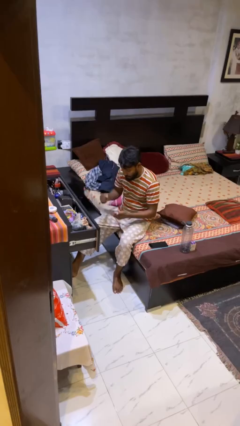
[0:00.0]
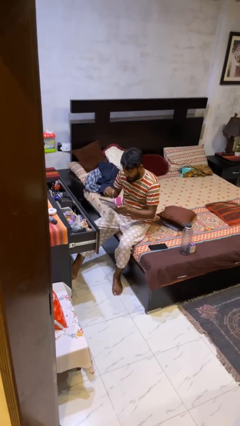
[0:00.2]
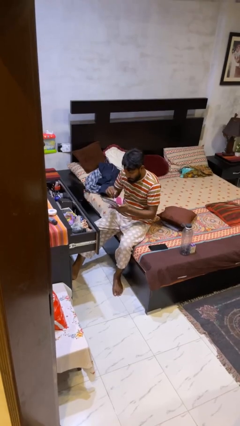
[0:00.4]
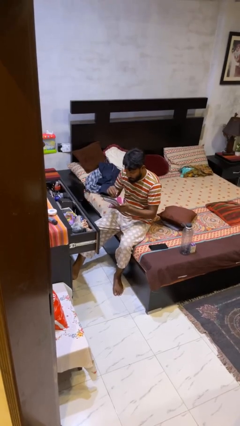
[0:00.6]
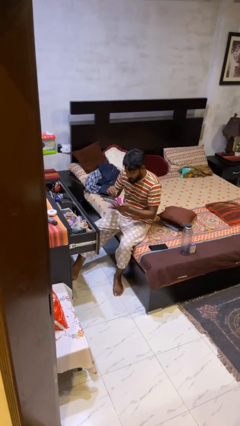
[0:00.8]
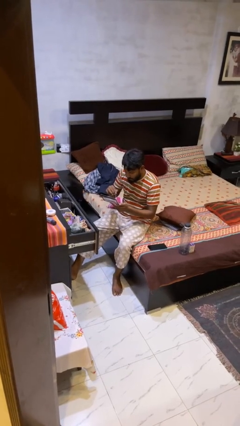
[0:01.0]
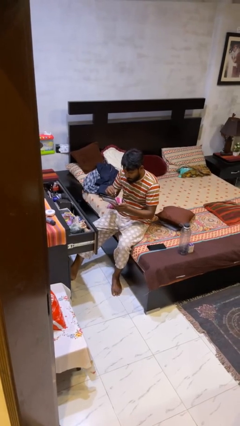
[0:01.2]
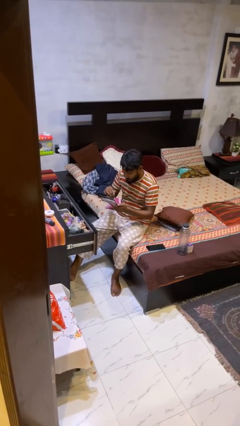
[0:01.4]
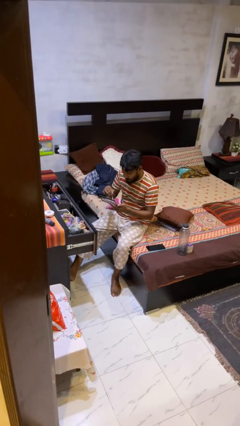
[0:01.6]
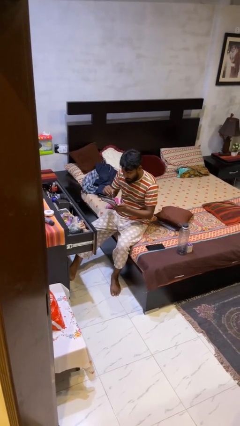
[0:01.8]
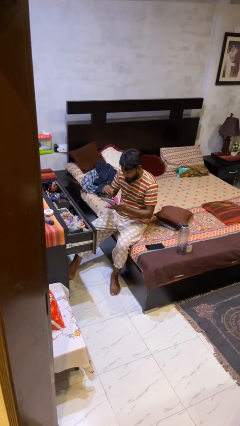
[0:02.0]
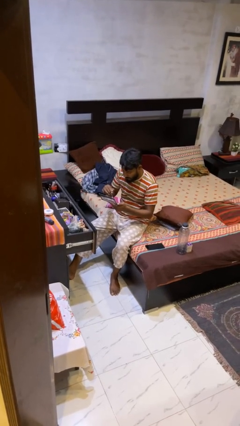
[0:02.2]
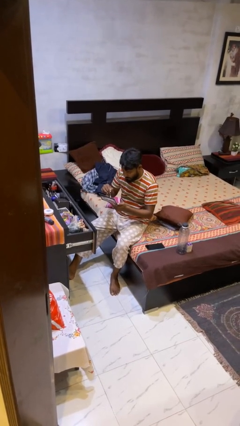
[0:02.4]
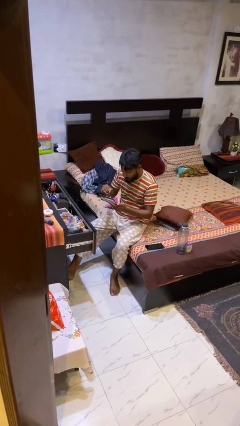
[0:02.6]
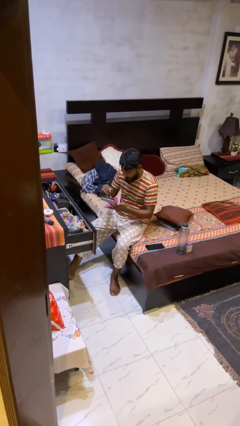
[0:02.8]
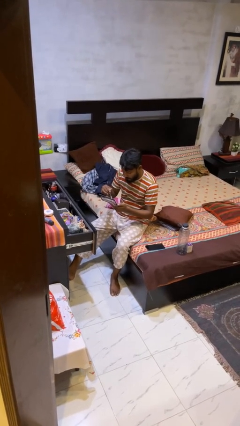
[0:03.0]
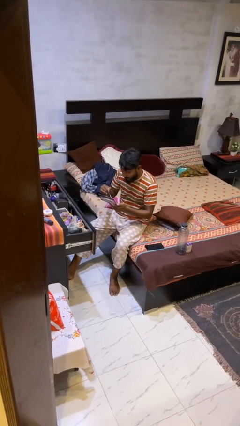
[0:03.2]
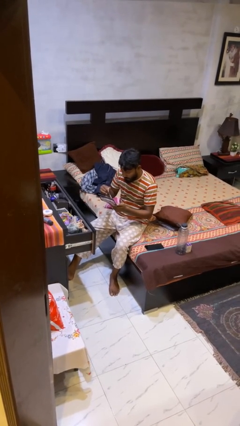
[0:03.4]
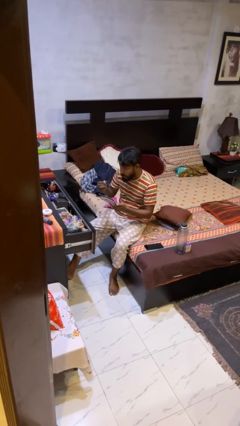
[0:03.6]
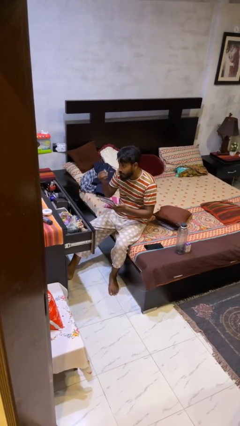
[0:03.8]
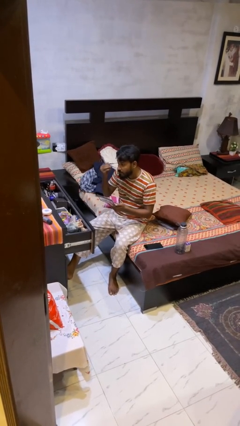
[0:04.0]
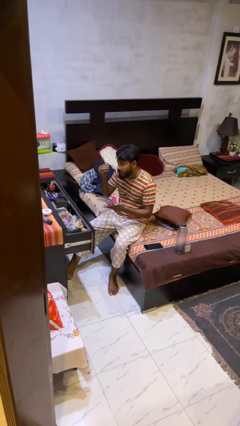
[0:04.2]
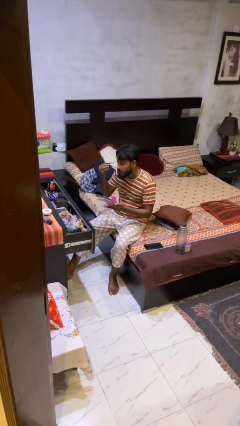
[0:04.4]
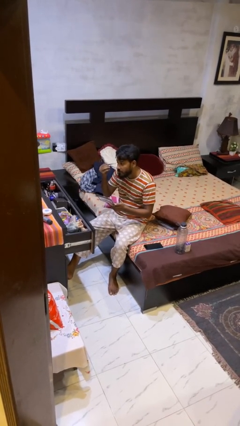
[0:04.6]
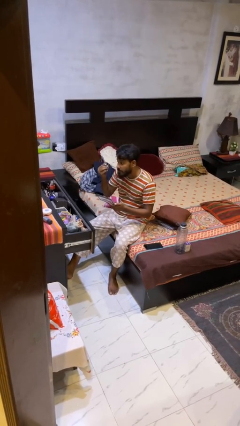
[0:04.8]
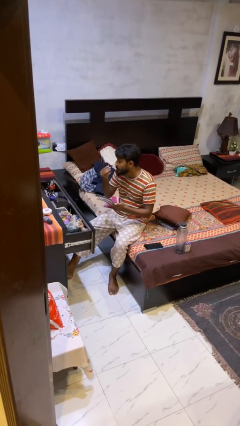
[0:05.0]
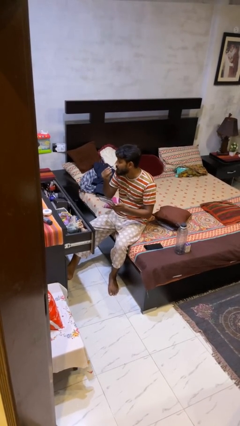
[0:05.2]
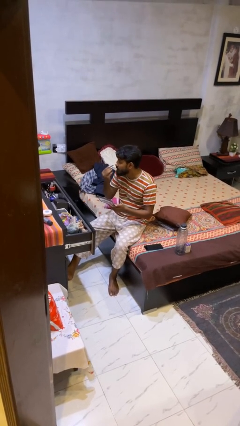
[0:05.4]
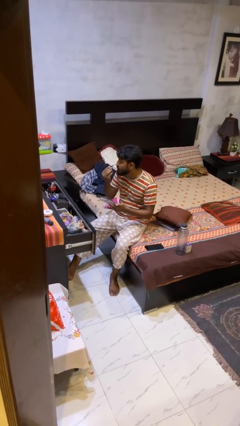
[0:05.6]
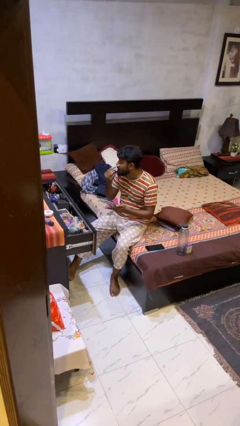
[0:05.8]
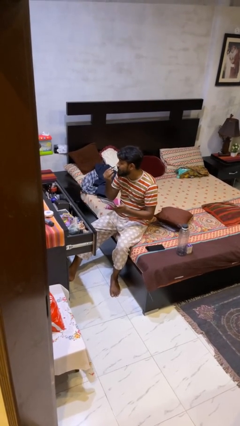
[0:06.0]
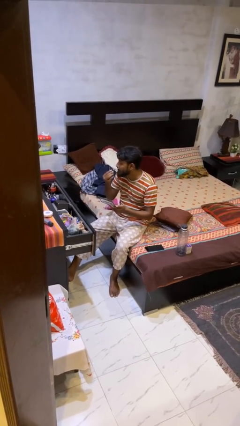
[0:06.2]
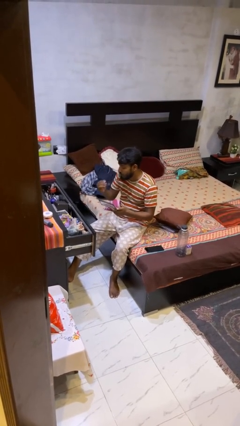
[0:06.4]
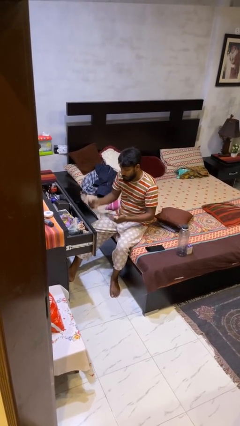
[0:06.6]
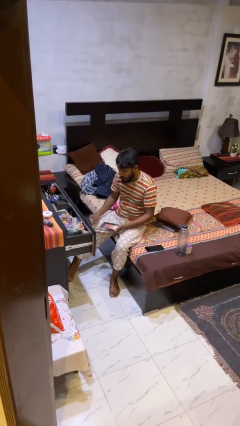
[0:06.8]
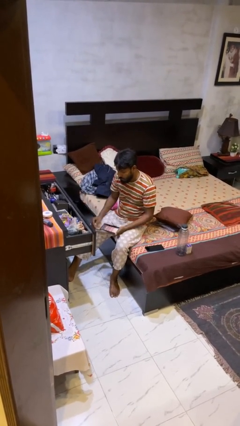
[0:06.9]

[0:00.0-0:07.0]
person applies eye makeup

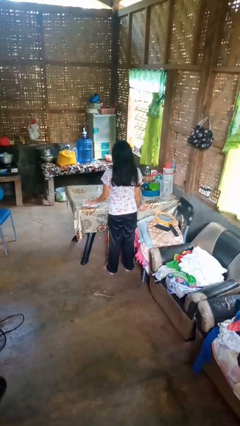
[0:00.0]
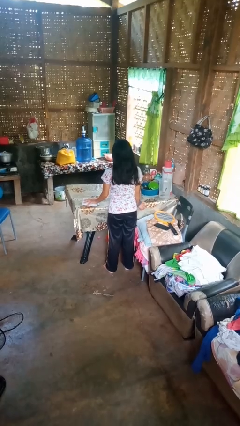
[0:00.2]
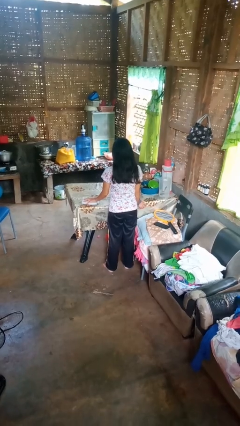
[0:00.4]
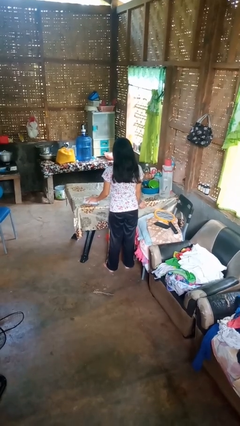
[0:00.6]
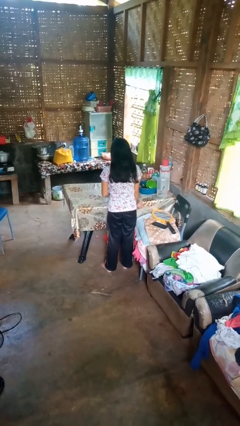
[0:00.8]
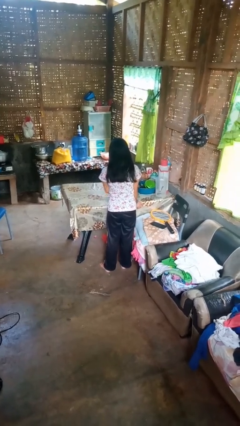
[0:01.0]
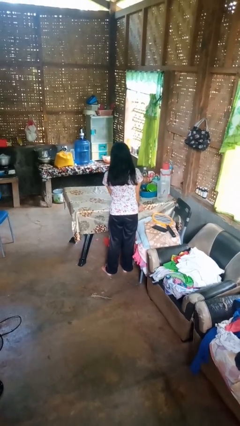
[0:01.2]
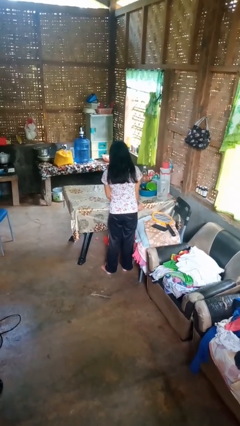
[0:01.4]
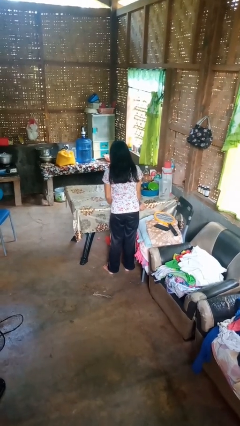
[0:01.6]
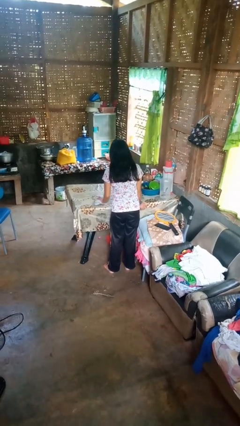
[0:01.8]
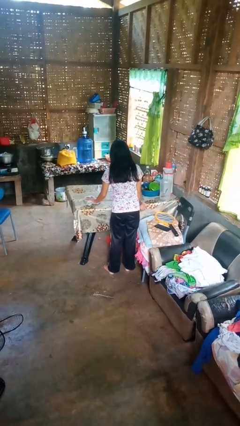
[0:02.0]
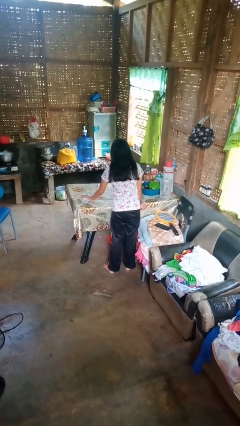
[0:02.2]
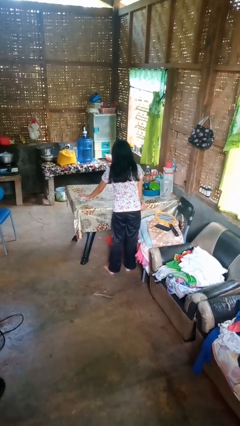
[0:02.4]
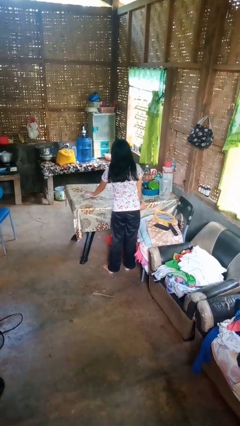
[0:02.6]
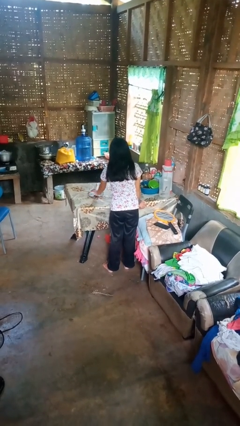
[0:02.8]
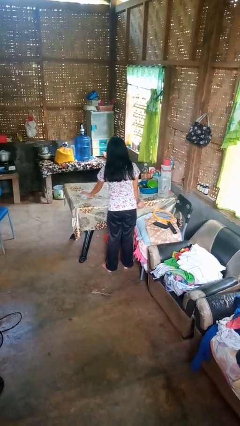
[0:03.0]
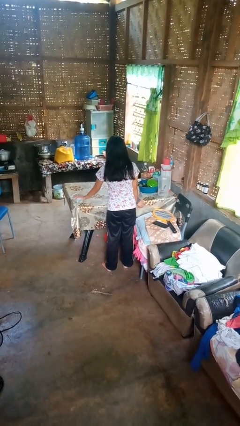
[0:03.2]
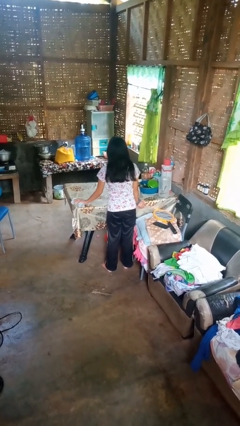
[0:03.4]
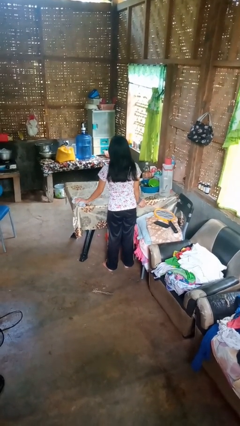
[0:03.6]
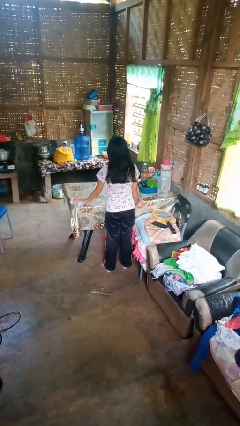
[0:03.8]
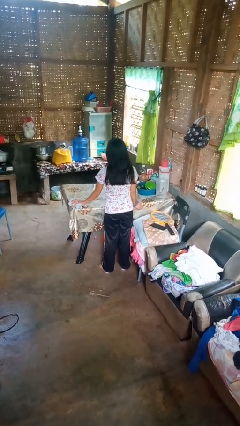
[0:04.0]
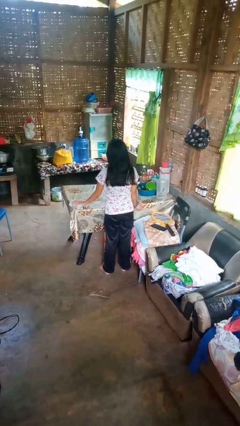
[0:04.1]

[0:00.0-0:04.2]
person cleans table with rag

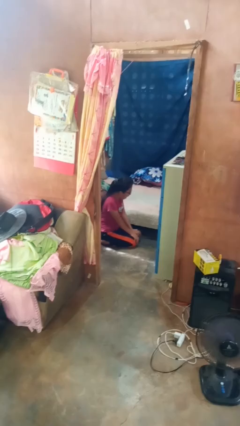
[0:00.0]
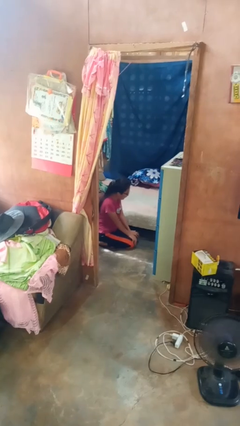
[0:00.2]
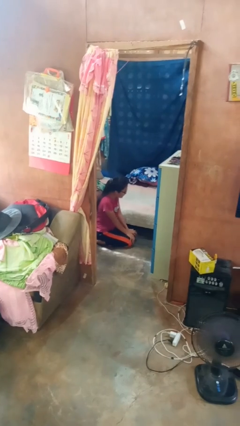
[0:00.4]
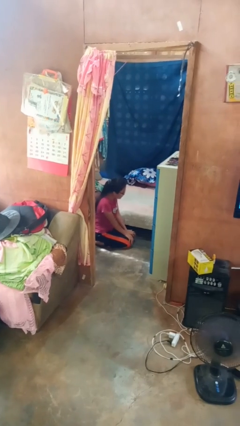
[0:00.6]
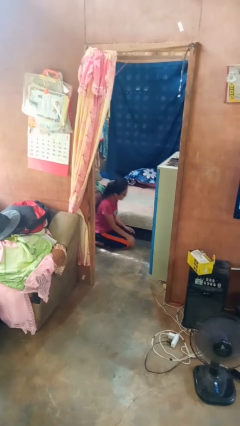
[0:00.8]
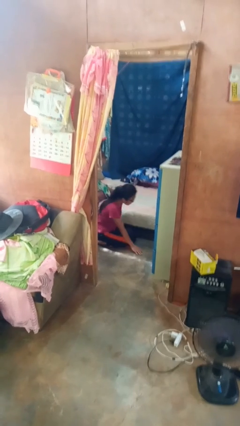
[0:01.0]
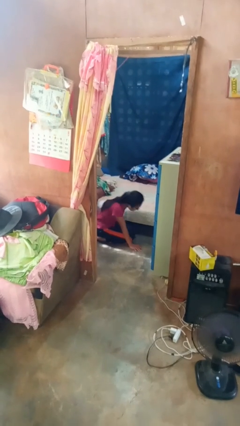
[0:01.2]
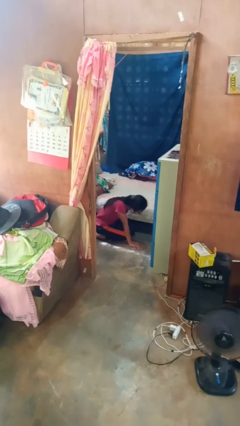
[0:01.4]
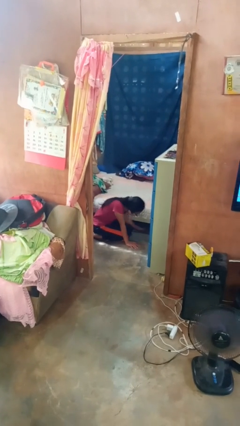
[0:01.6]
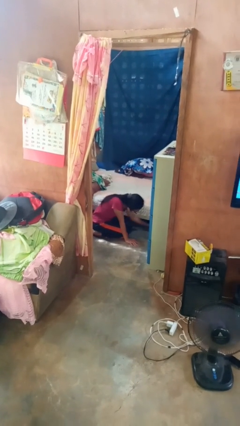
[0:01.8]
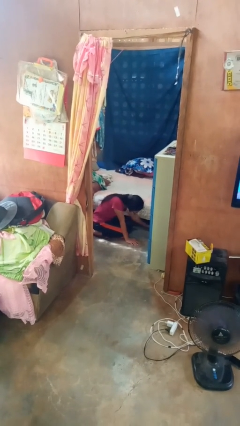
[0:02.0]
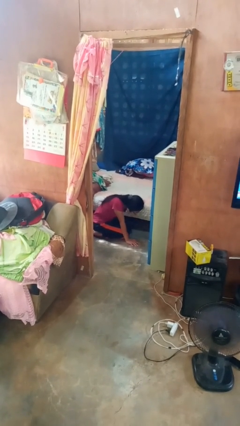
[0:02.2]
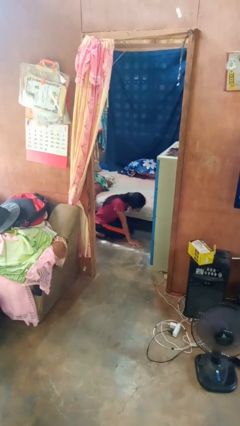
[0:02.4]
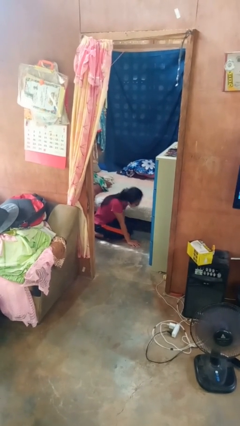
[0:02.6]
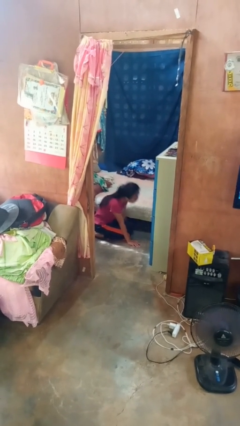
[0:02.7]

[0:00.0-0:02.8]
person searches under bed

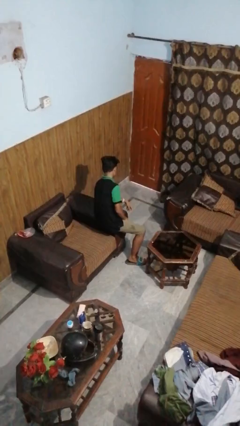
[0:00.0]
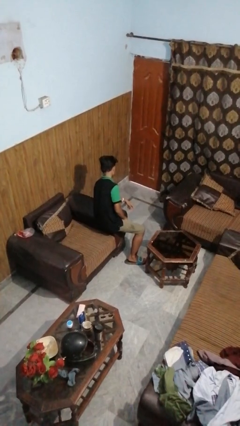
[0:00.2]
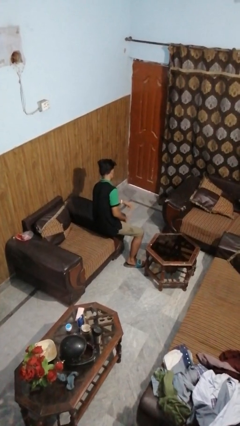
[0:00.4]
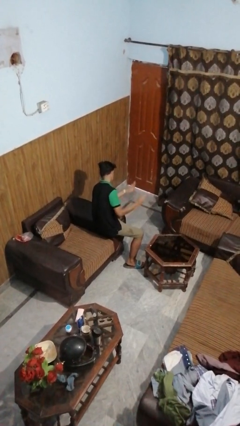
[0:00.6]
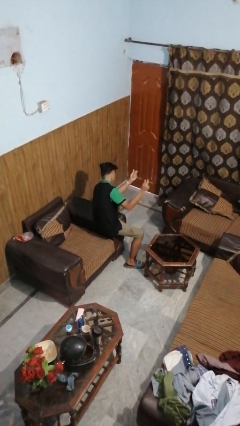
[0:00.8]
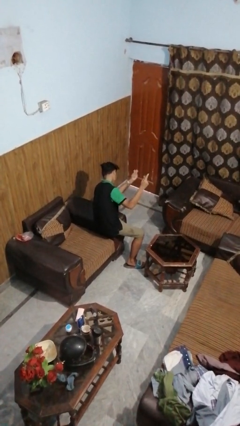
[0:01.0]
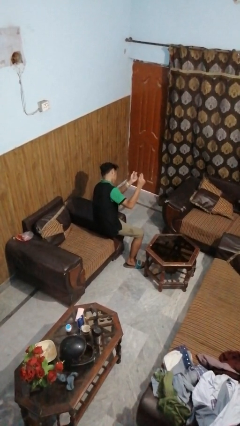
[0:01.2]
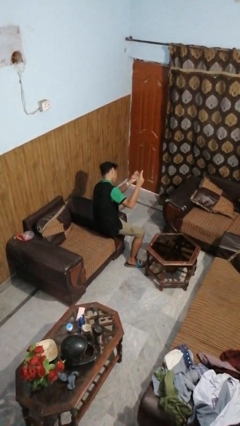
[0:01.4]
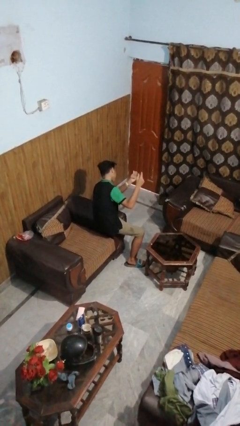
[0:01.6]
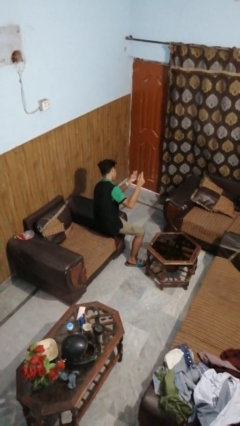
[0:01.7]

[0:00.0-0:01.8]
person snaps fingers

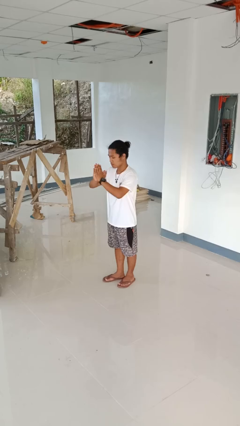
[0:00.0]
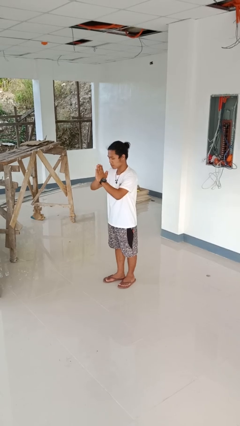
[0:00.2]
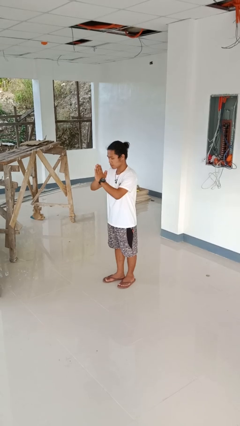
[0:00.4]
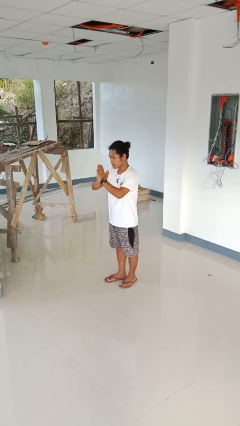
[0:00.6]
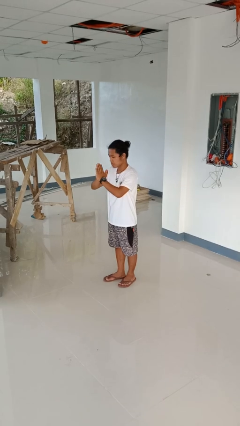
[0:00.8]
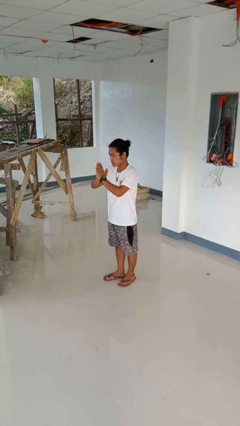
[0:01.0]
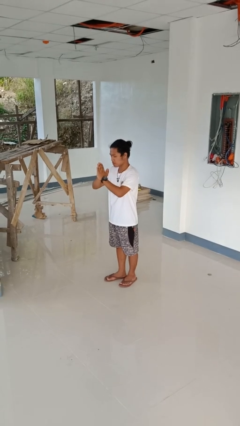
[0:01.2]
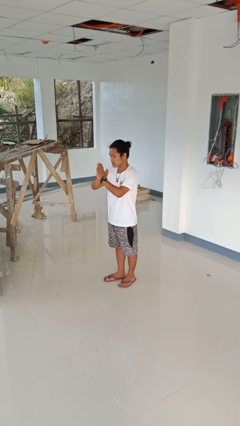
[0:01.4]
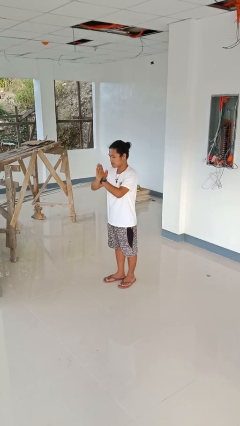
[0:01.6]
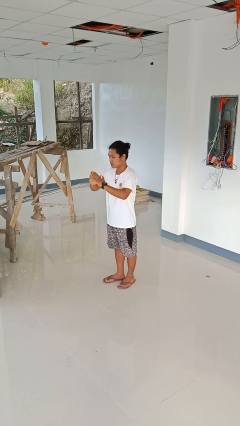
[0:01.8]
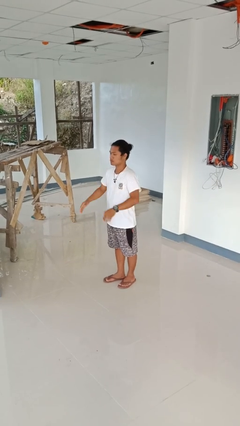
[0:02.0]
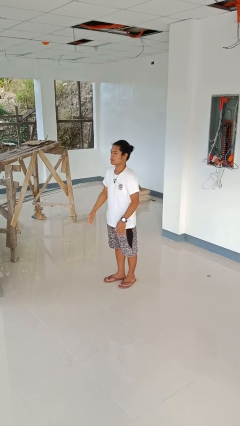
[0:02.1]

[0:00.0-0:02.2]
person prays
